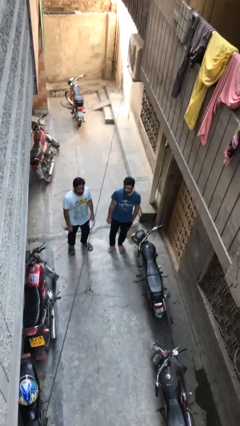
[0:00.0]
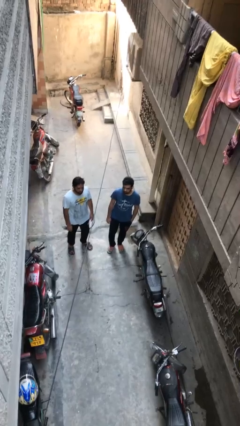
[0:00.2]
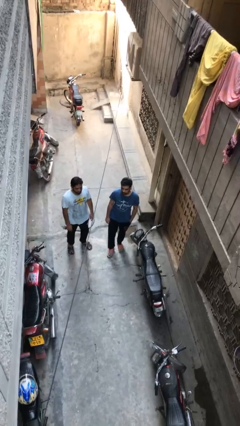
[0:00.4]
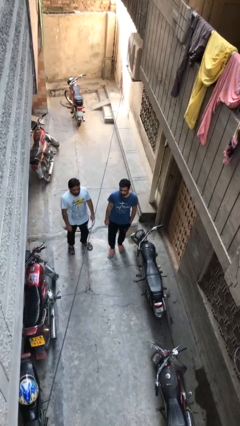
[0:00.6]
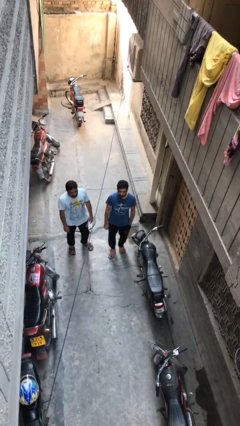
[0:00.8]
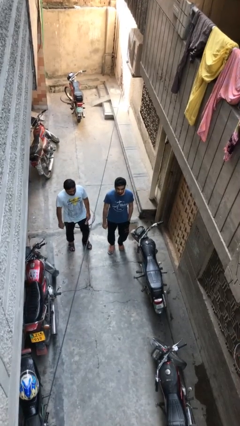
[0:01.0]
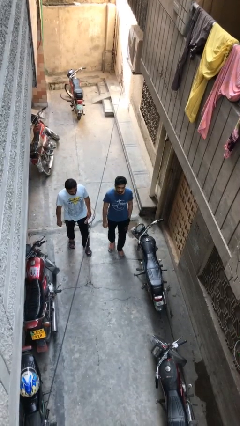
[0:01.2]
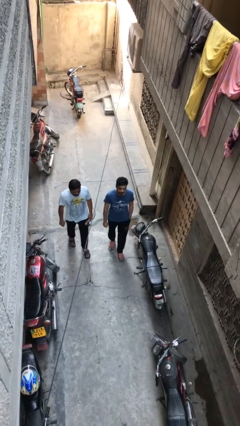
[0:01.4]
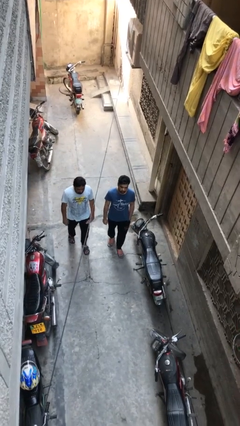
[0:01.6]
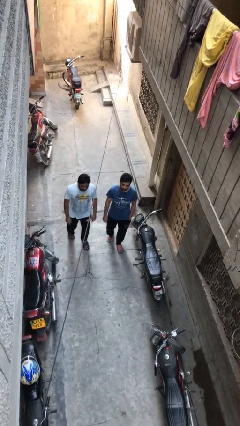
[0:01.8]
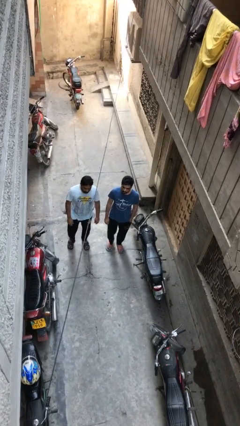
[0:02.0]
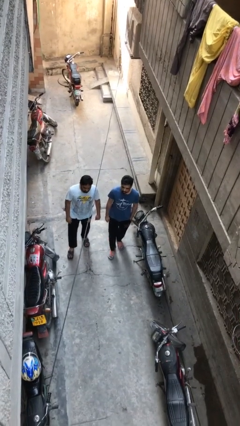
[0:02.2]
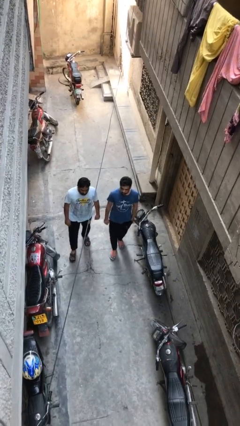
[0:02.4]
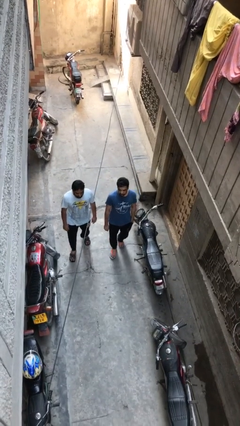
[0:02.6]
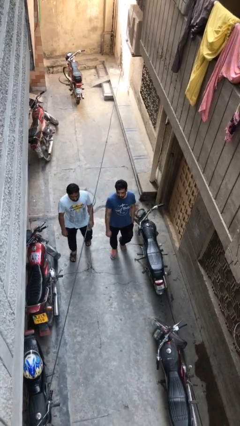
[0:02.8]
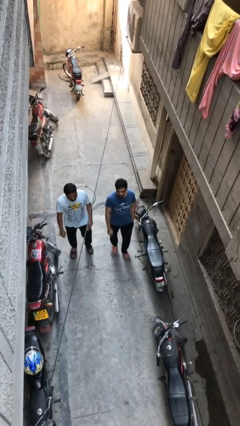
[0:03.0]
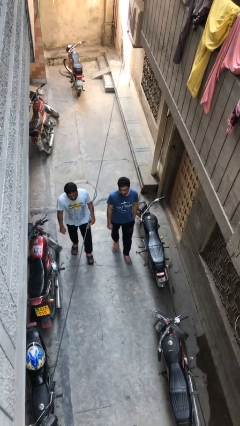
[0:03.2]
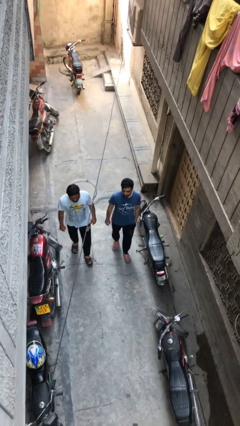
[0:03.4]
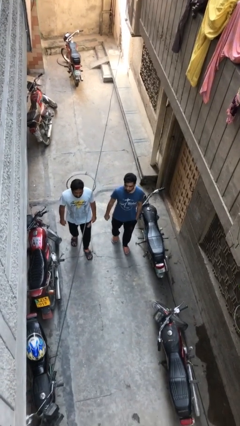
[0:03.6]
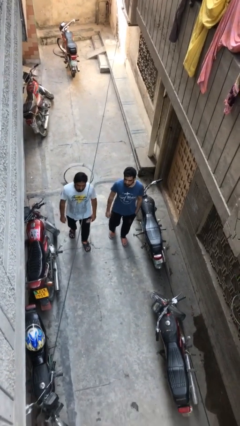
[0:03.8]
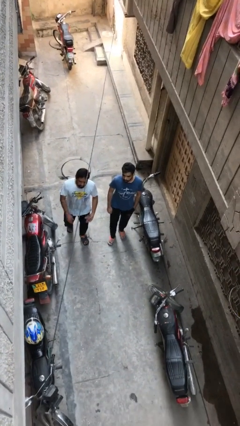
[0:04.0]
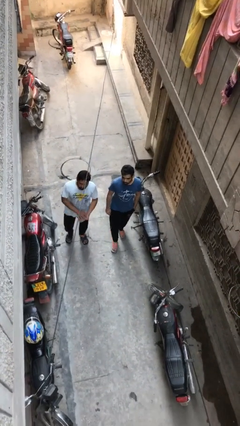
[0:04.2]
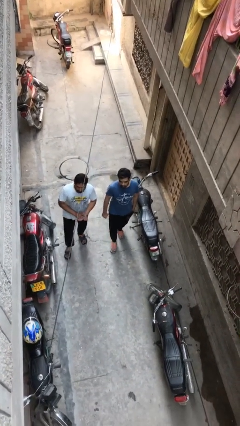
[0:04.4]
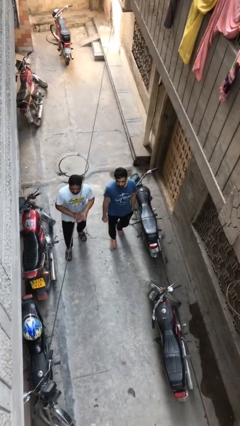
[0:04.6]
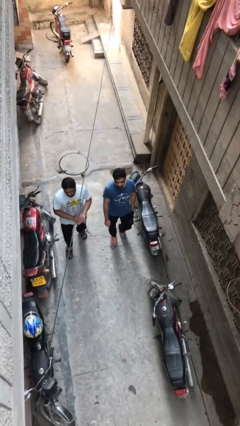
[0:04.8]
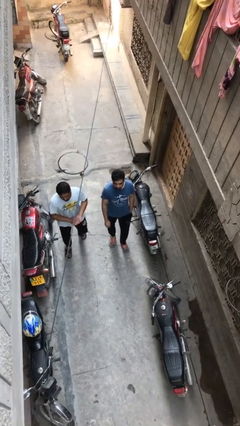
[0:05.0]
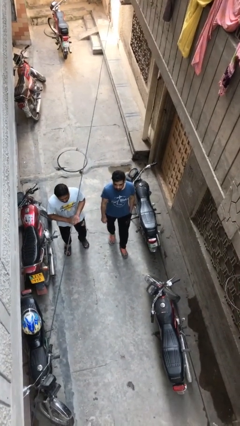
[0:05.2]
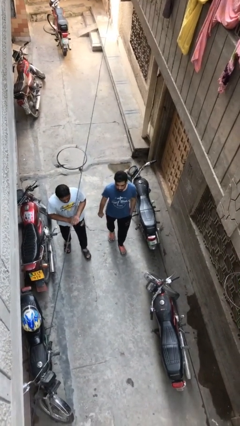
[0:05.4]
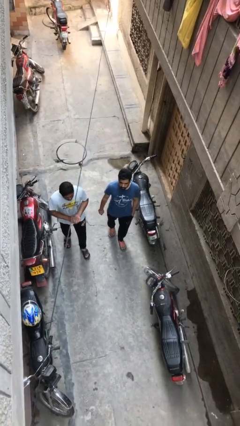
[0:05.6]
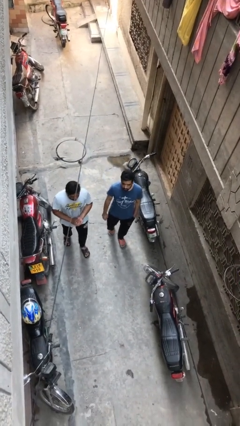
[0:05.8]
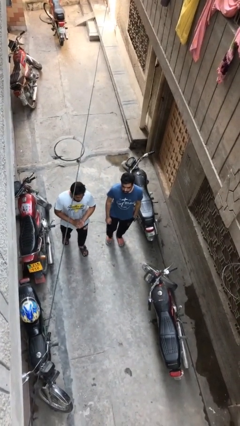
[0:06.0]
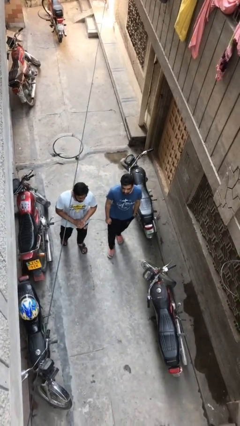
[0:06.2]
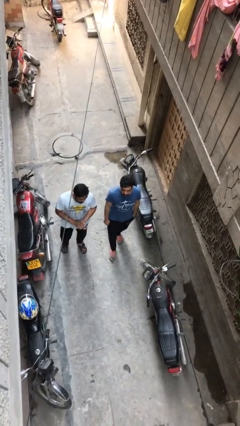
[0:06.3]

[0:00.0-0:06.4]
person talks to person

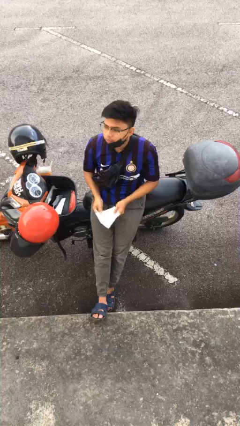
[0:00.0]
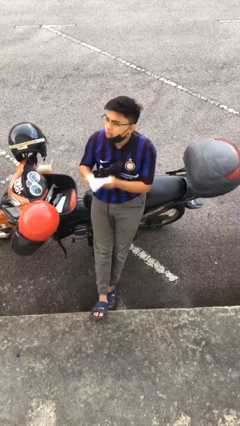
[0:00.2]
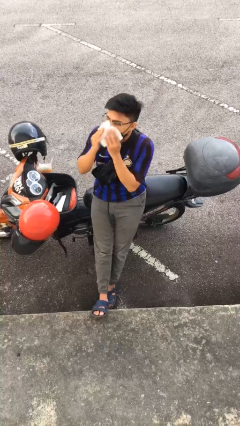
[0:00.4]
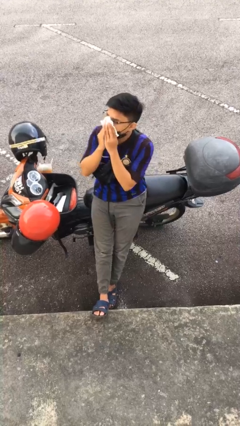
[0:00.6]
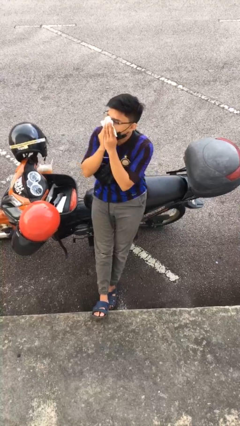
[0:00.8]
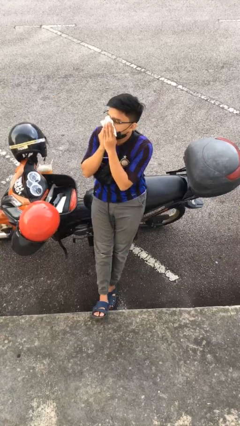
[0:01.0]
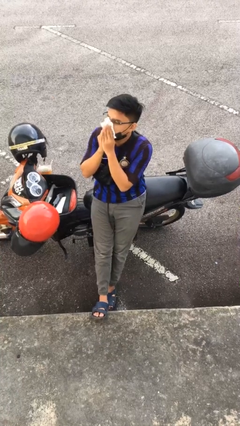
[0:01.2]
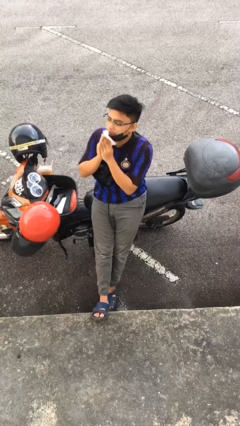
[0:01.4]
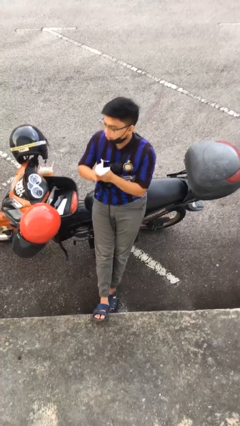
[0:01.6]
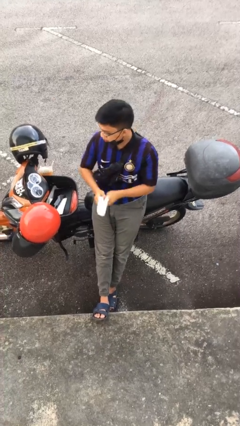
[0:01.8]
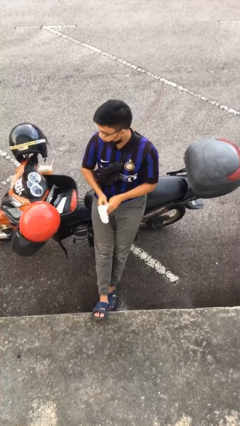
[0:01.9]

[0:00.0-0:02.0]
person blows nose

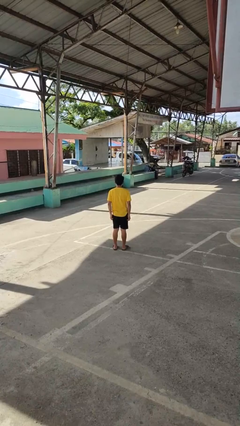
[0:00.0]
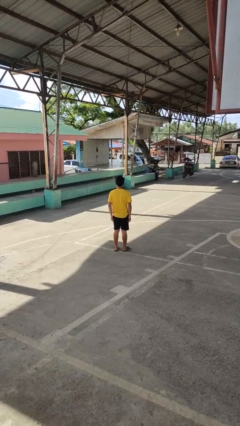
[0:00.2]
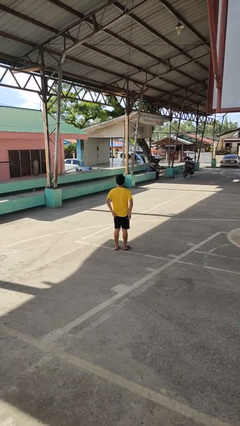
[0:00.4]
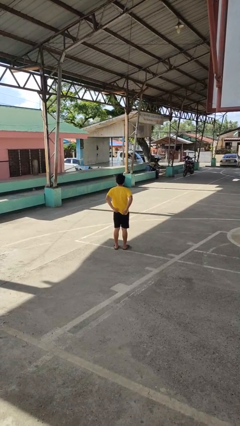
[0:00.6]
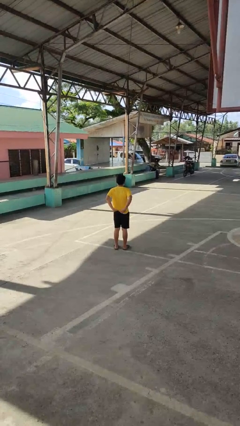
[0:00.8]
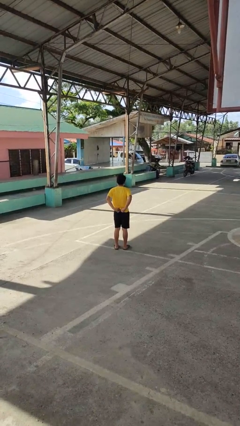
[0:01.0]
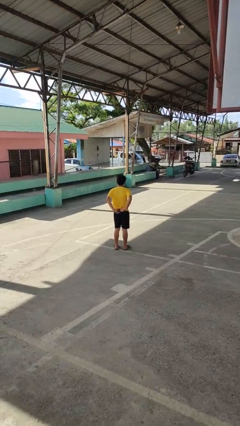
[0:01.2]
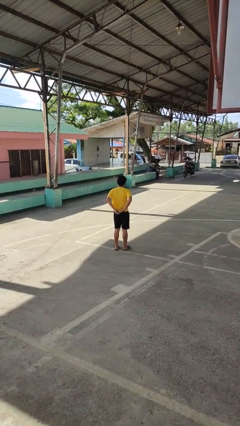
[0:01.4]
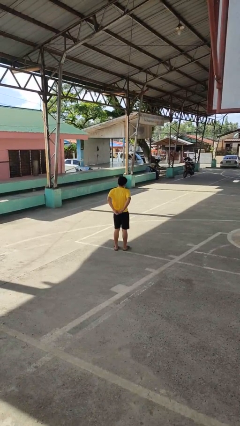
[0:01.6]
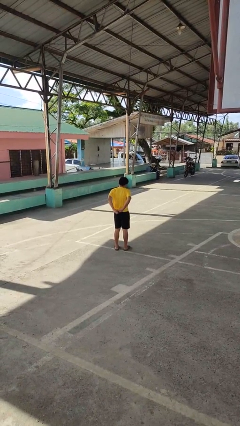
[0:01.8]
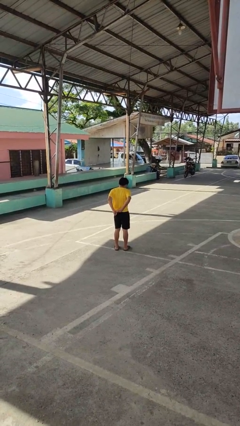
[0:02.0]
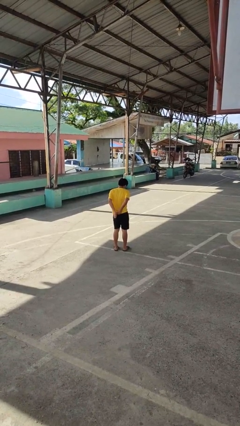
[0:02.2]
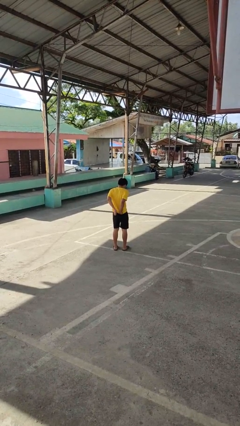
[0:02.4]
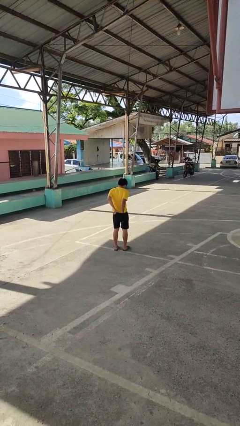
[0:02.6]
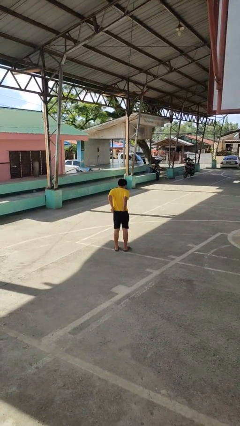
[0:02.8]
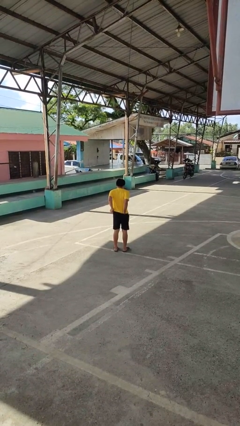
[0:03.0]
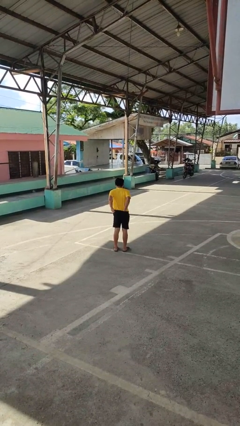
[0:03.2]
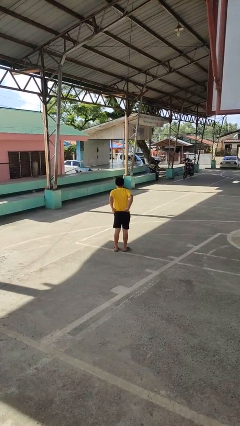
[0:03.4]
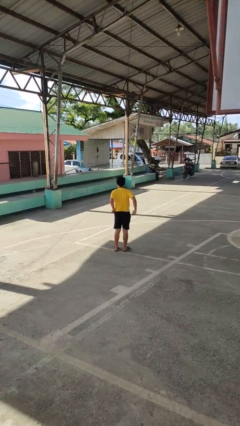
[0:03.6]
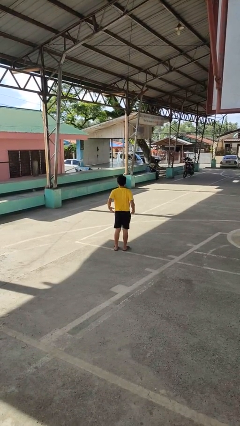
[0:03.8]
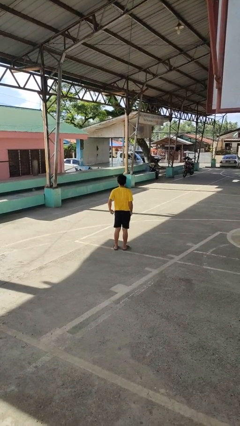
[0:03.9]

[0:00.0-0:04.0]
person tucks in shirt

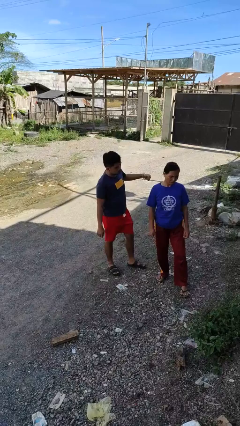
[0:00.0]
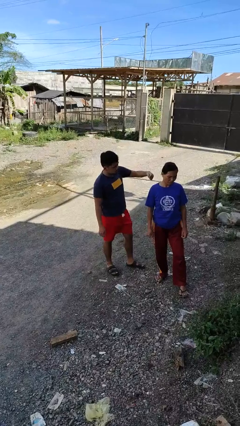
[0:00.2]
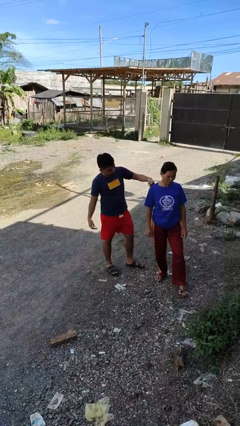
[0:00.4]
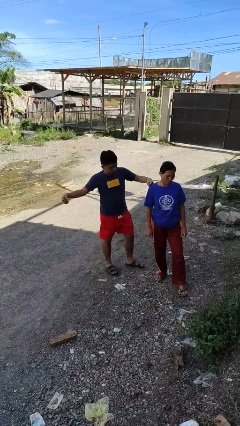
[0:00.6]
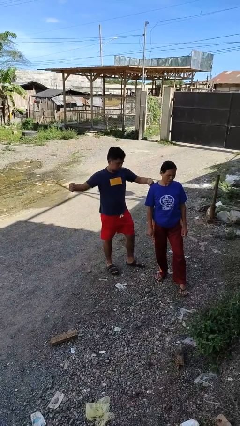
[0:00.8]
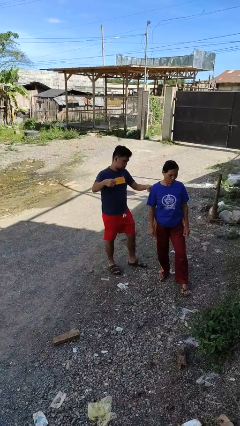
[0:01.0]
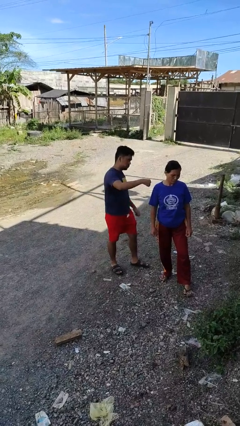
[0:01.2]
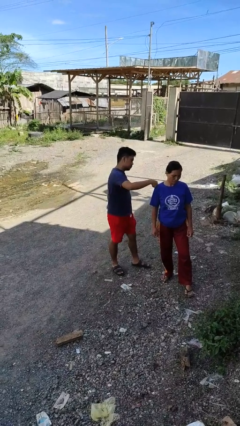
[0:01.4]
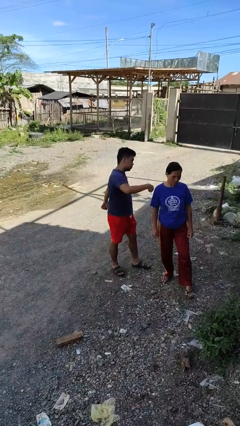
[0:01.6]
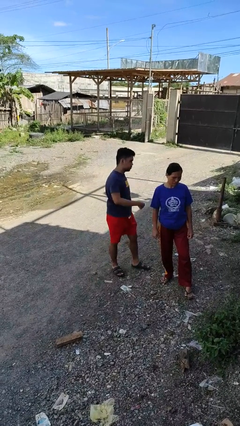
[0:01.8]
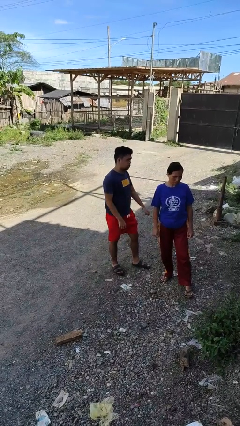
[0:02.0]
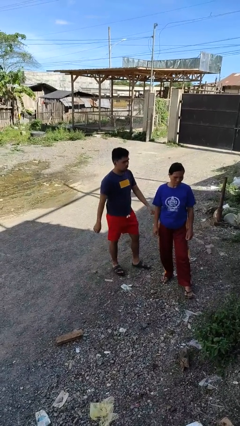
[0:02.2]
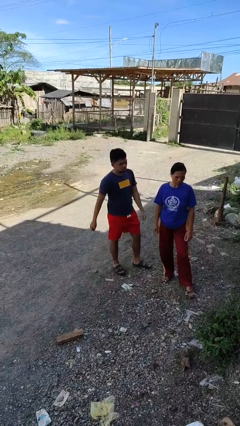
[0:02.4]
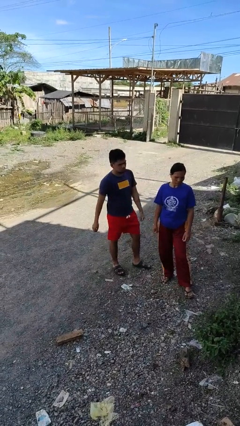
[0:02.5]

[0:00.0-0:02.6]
person pounds shoulders of person

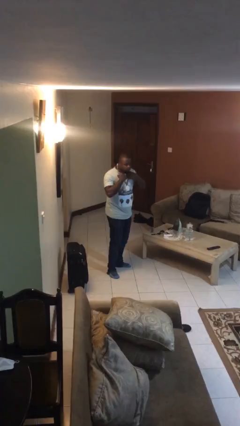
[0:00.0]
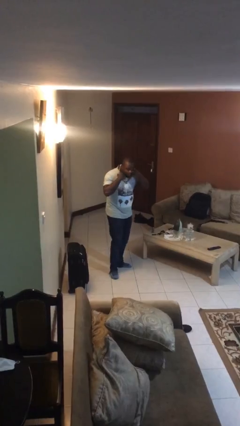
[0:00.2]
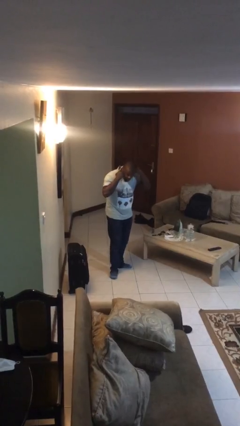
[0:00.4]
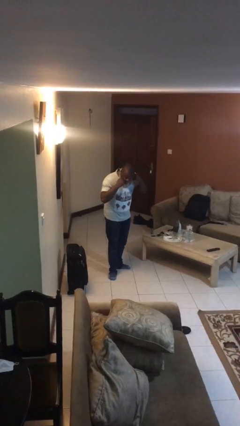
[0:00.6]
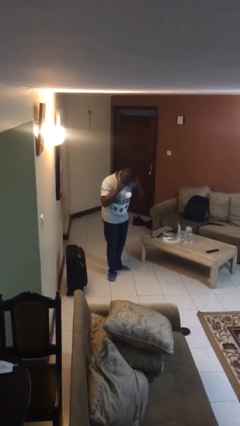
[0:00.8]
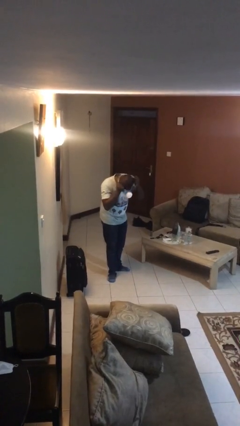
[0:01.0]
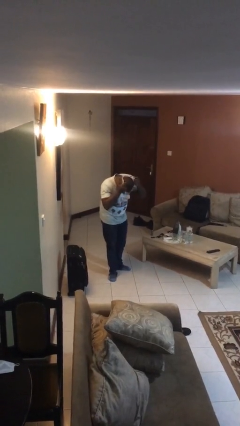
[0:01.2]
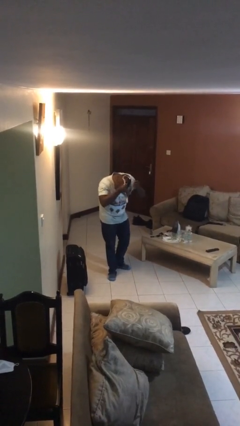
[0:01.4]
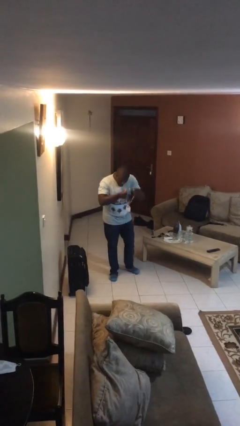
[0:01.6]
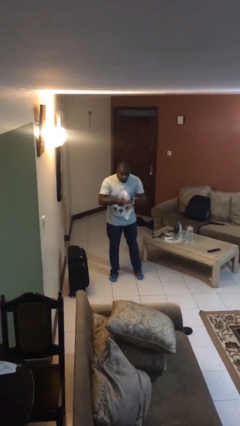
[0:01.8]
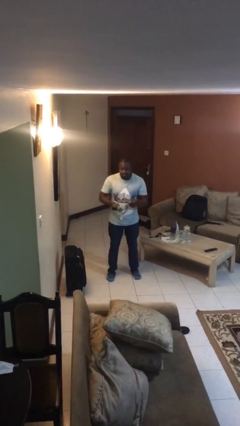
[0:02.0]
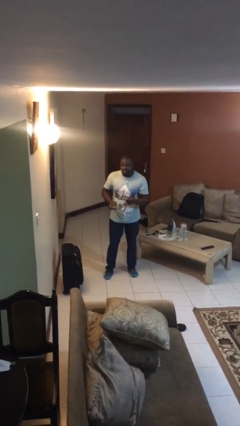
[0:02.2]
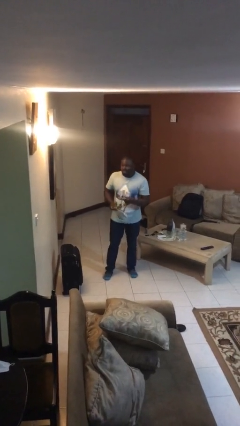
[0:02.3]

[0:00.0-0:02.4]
person takes off necklace

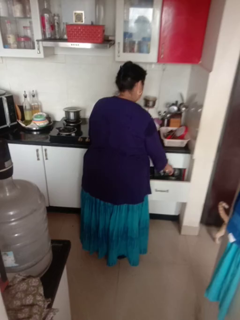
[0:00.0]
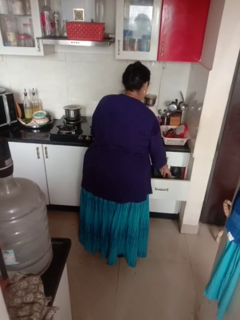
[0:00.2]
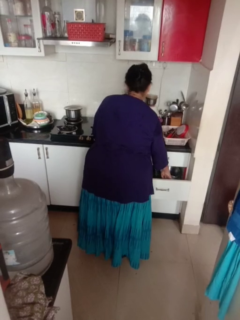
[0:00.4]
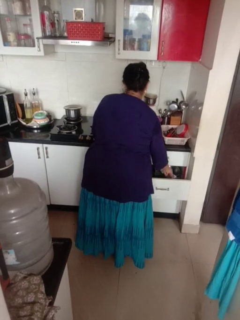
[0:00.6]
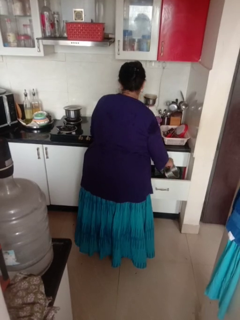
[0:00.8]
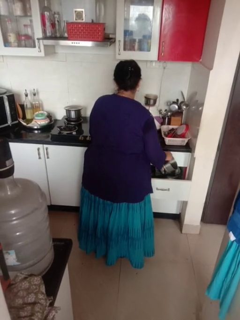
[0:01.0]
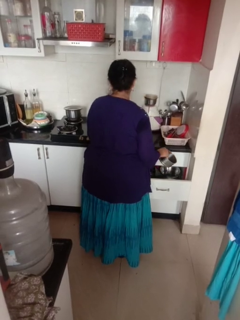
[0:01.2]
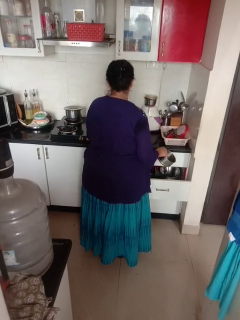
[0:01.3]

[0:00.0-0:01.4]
person takes object from kitchen drawer
